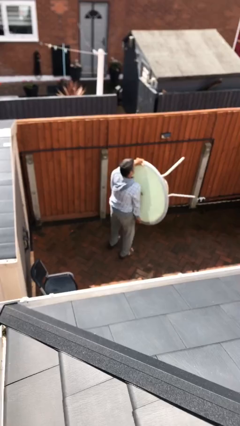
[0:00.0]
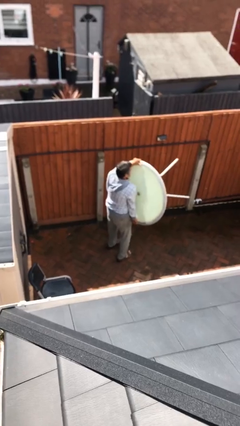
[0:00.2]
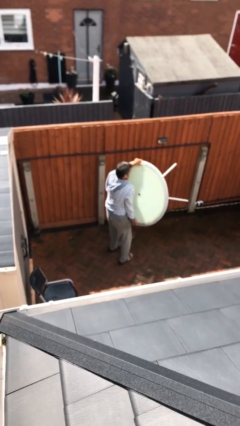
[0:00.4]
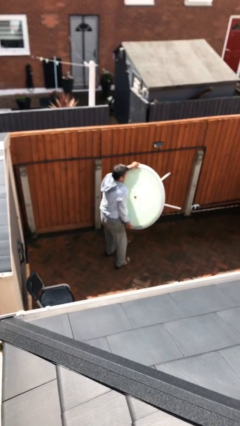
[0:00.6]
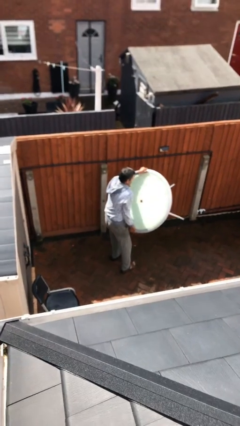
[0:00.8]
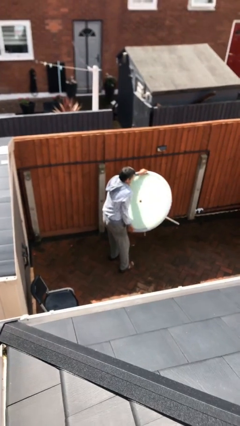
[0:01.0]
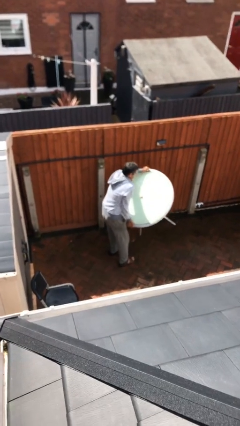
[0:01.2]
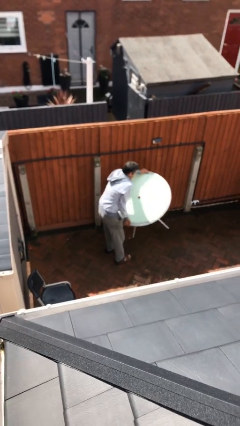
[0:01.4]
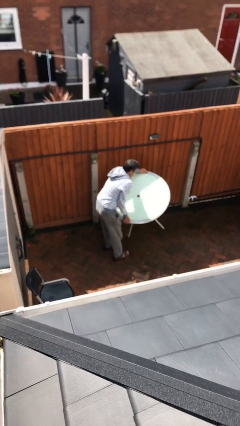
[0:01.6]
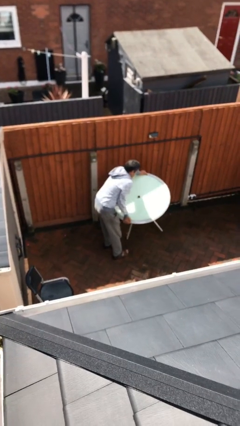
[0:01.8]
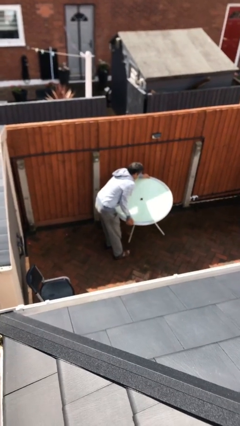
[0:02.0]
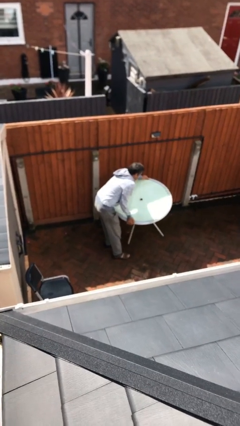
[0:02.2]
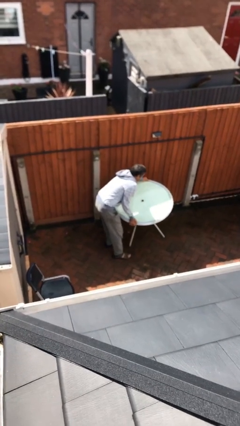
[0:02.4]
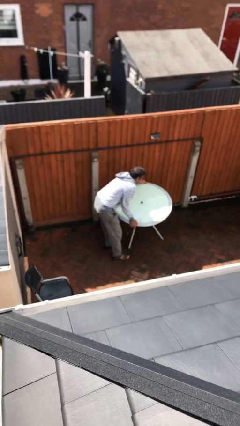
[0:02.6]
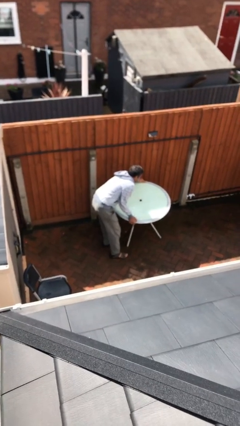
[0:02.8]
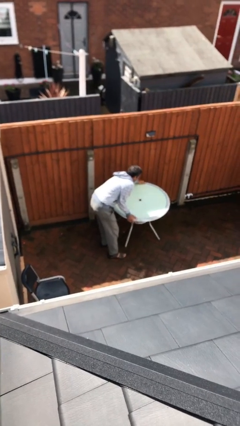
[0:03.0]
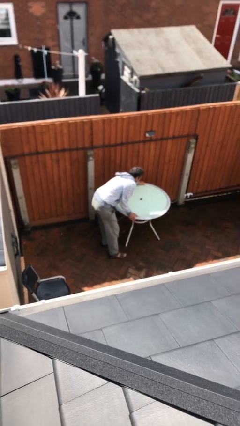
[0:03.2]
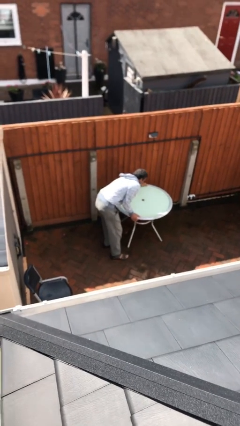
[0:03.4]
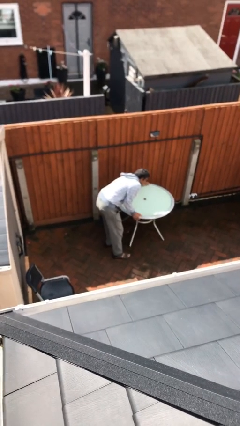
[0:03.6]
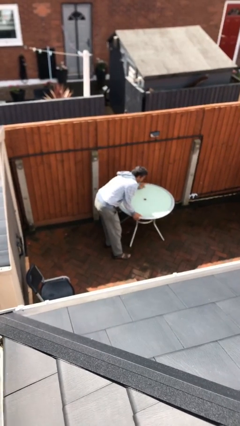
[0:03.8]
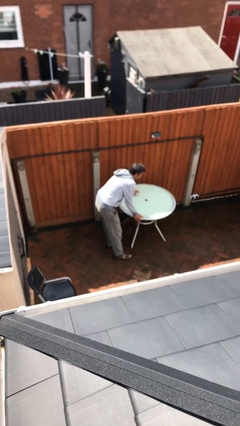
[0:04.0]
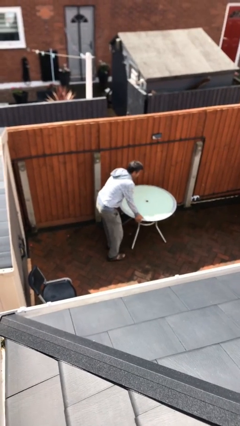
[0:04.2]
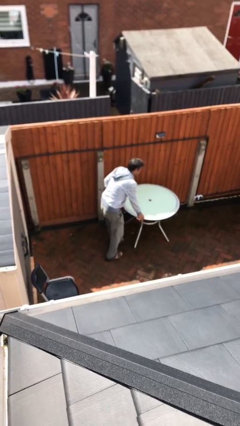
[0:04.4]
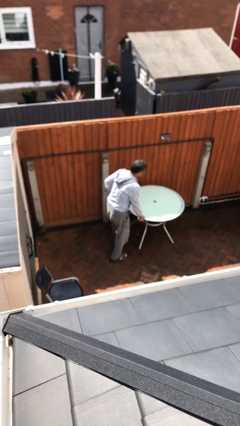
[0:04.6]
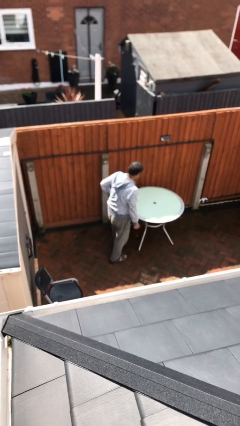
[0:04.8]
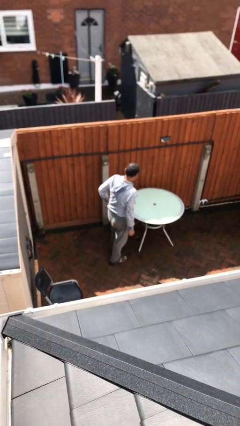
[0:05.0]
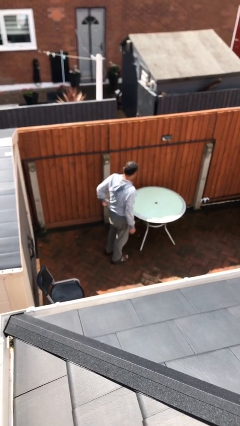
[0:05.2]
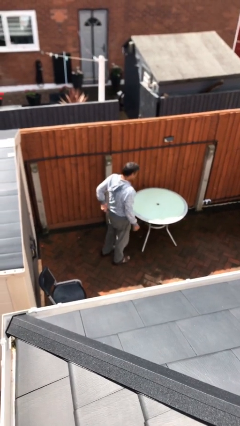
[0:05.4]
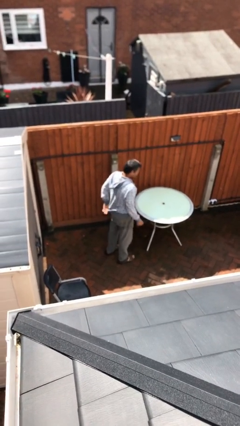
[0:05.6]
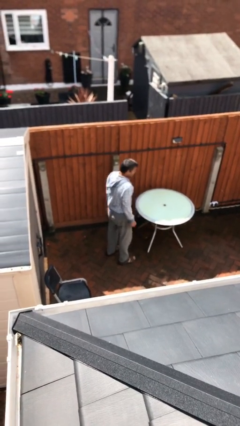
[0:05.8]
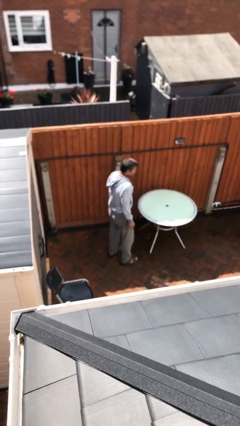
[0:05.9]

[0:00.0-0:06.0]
person puts down object on floor

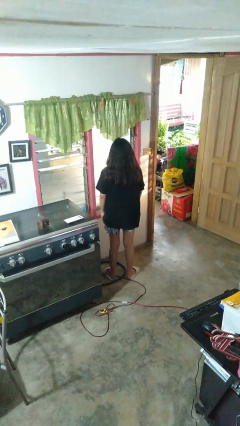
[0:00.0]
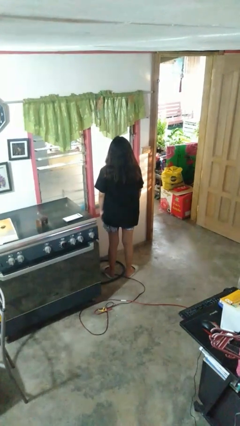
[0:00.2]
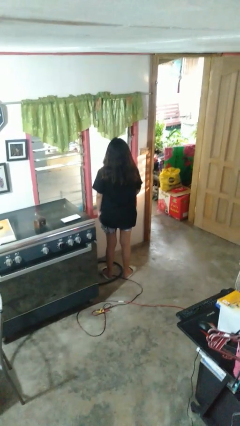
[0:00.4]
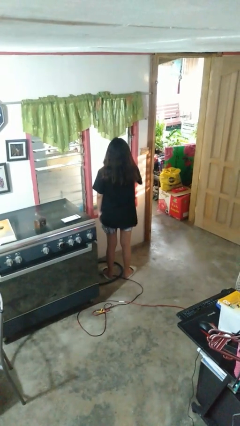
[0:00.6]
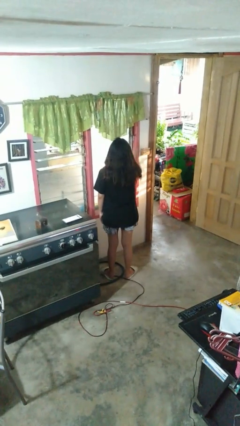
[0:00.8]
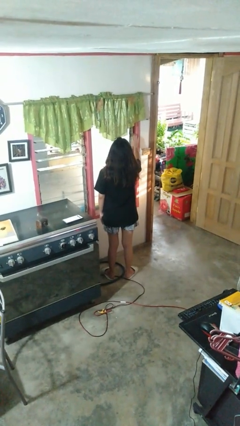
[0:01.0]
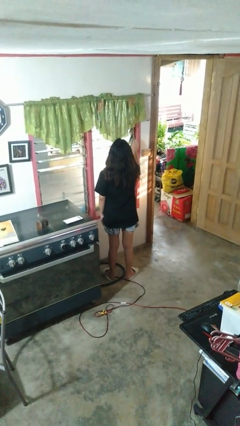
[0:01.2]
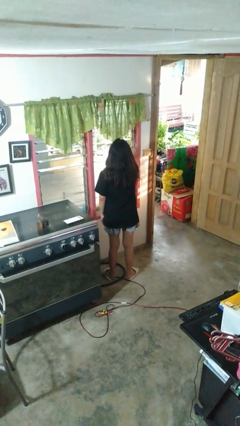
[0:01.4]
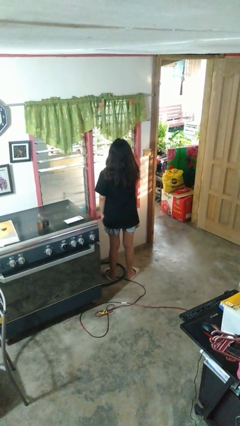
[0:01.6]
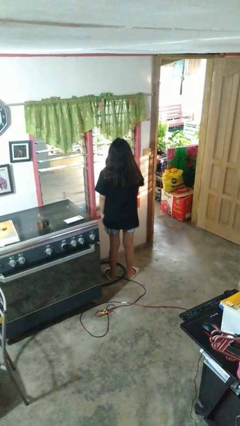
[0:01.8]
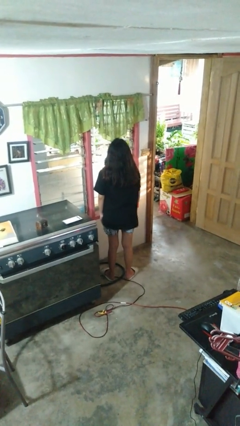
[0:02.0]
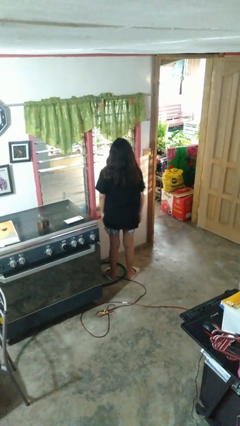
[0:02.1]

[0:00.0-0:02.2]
person opens home window

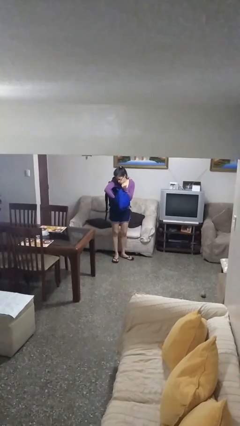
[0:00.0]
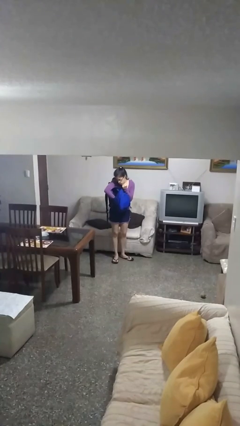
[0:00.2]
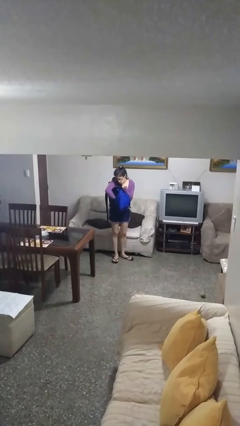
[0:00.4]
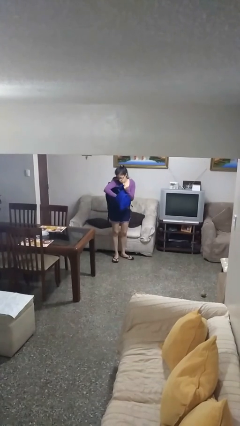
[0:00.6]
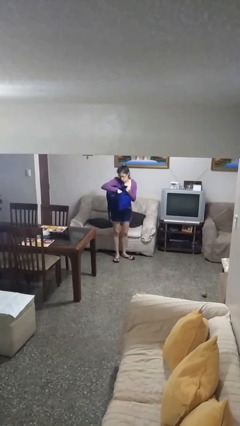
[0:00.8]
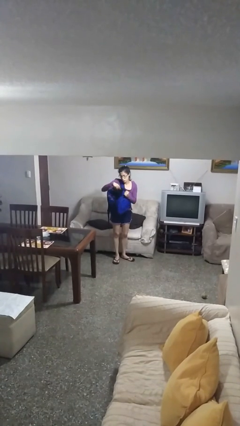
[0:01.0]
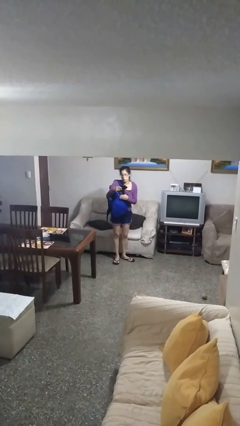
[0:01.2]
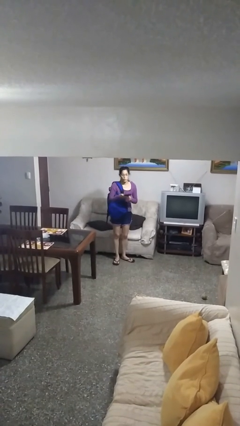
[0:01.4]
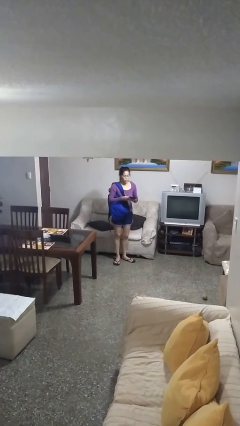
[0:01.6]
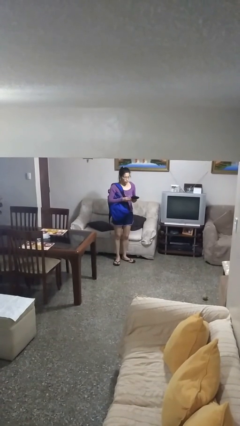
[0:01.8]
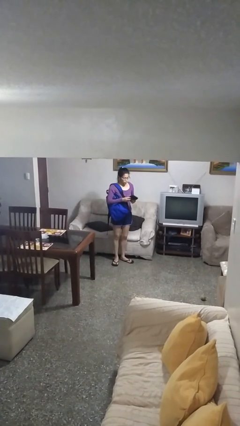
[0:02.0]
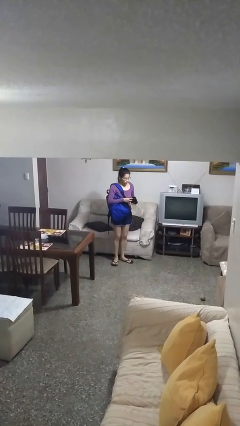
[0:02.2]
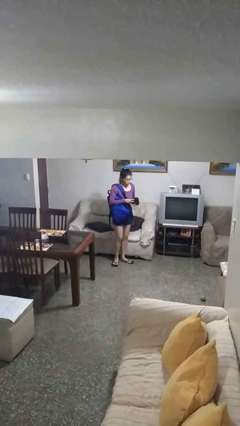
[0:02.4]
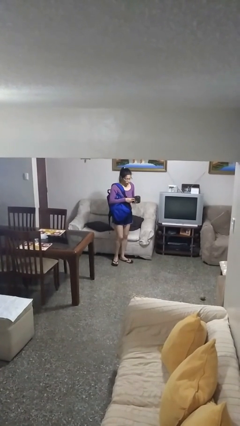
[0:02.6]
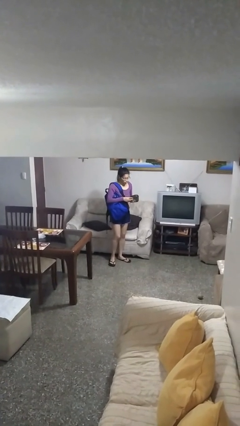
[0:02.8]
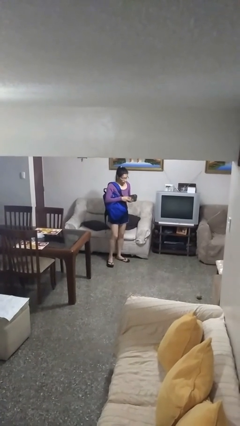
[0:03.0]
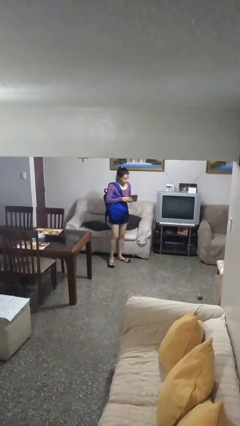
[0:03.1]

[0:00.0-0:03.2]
person takes object from backpack

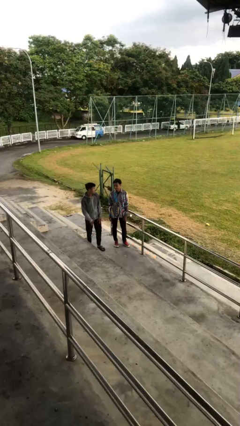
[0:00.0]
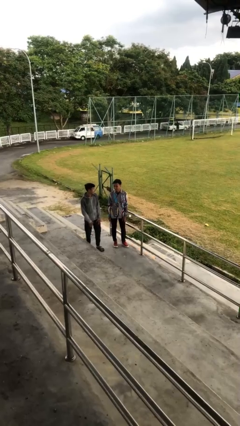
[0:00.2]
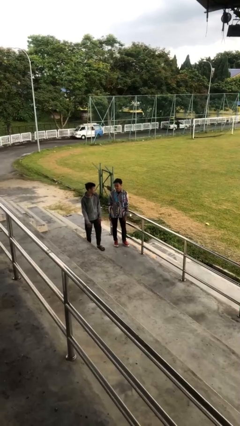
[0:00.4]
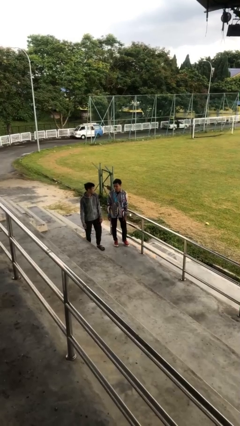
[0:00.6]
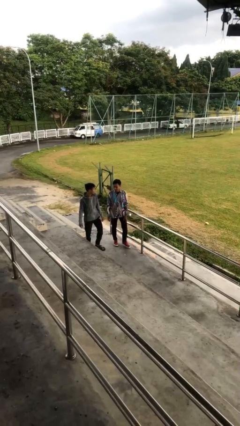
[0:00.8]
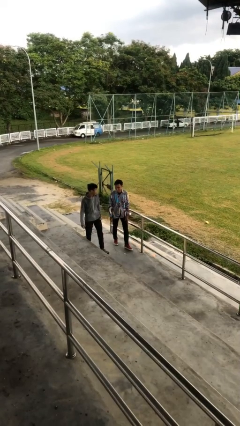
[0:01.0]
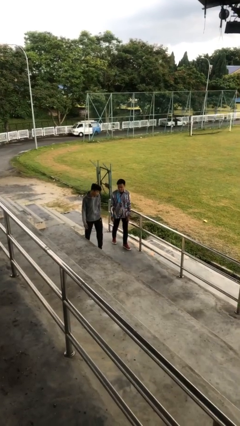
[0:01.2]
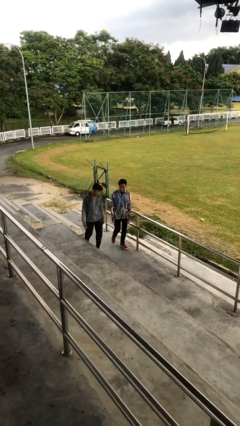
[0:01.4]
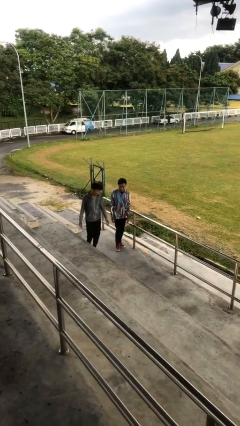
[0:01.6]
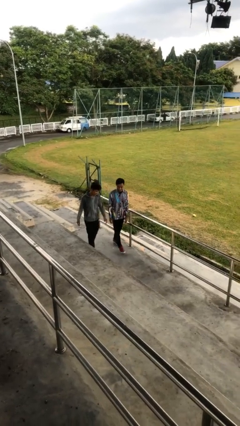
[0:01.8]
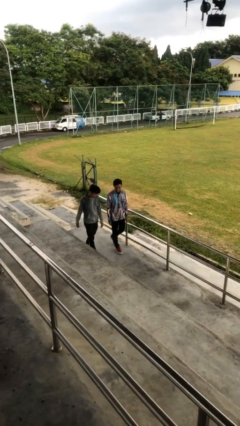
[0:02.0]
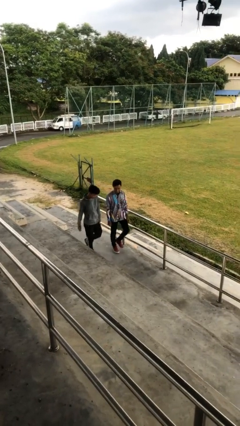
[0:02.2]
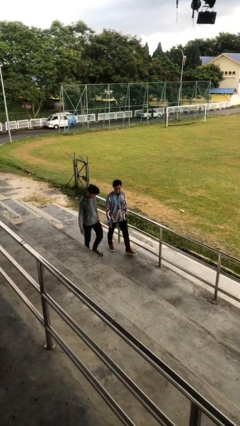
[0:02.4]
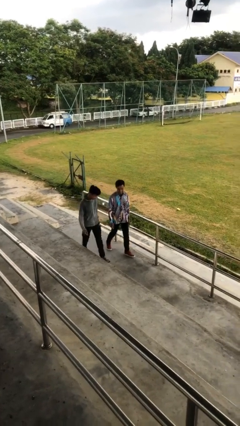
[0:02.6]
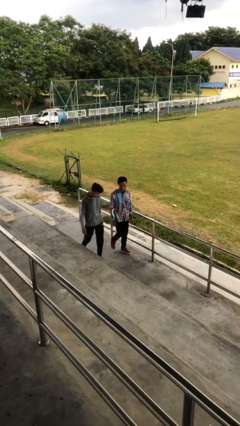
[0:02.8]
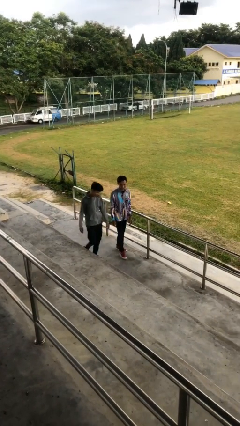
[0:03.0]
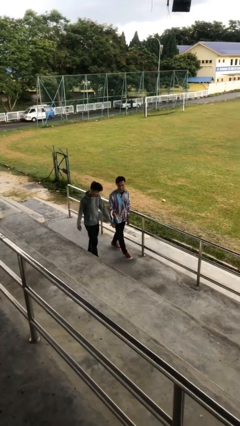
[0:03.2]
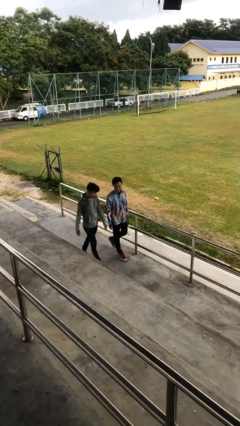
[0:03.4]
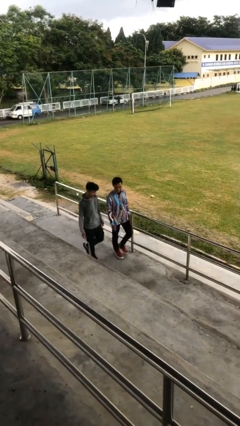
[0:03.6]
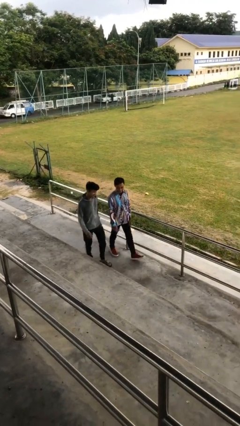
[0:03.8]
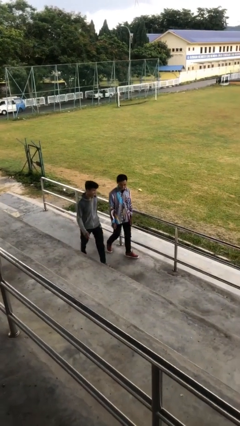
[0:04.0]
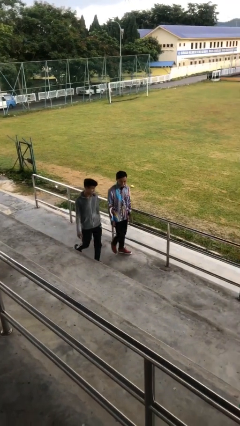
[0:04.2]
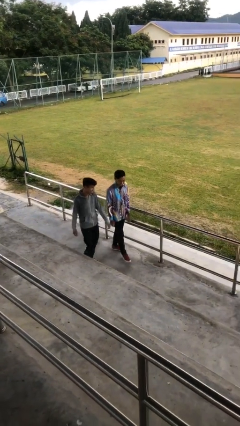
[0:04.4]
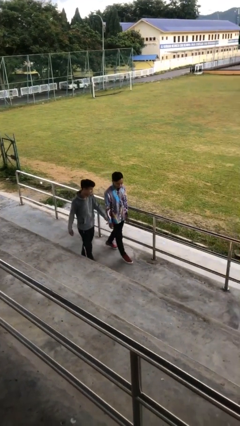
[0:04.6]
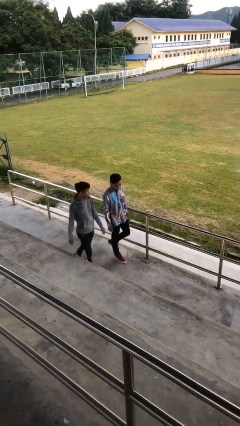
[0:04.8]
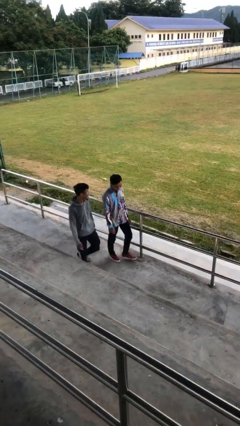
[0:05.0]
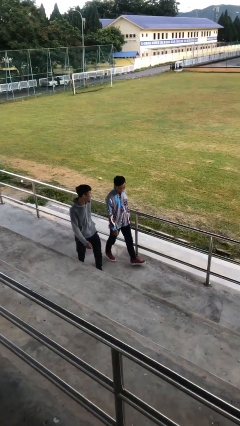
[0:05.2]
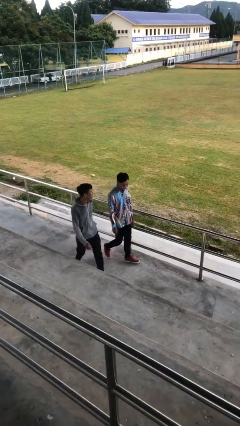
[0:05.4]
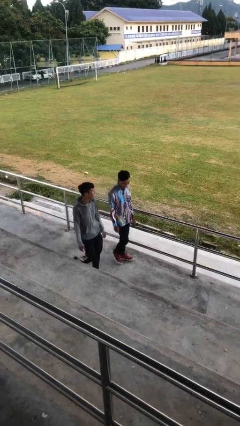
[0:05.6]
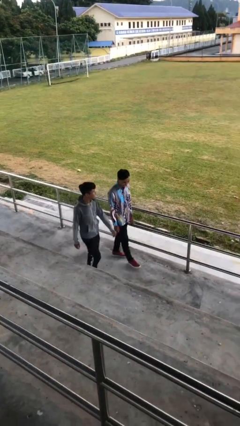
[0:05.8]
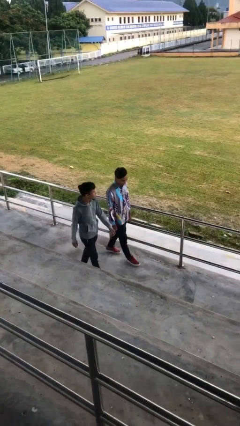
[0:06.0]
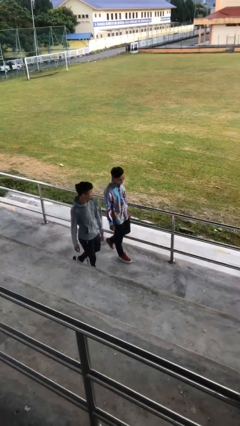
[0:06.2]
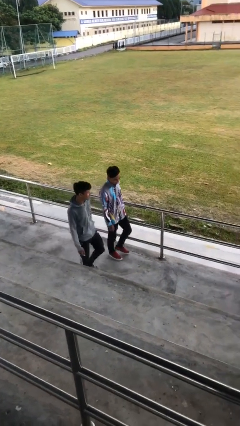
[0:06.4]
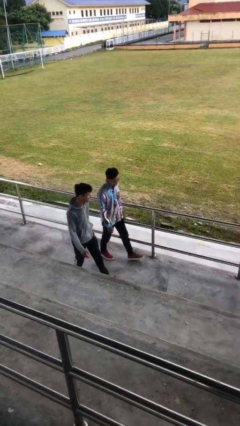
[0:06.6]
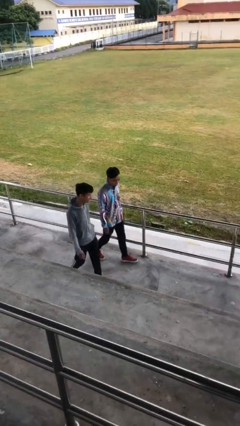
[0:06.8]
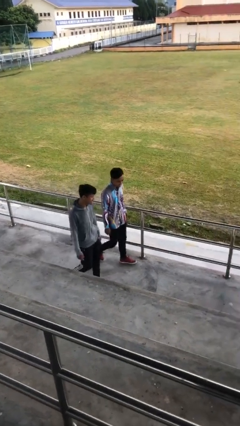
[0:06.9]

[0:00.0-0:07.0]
person talks to person
